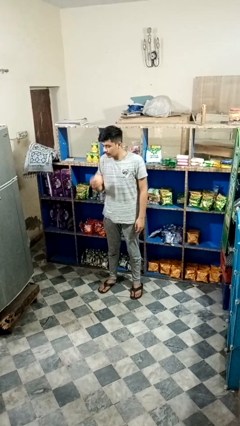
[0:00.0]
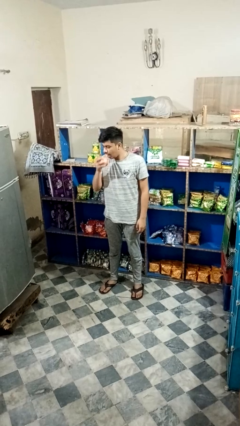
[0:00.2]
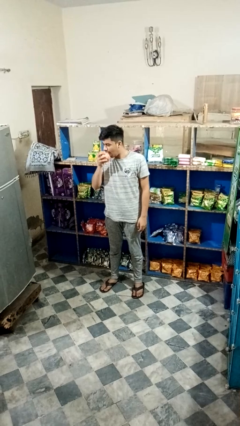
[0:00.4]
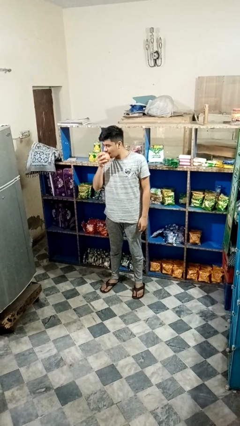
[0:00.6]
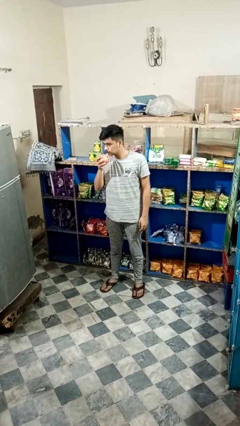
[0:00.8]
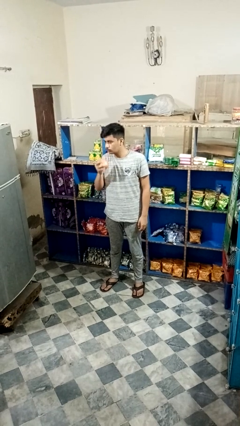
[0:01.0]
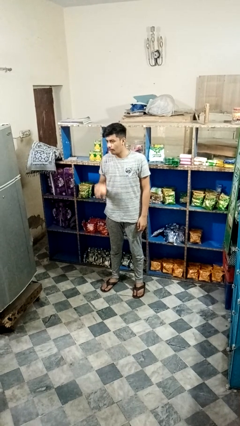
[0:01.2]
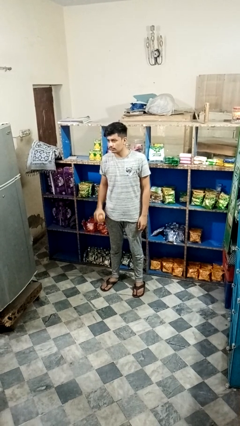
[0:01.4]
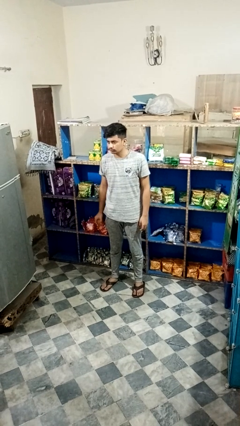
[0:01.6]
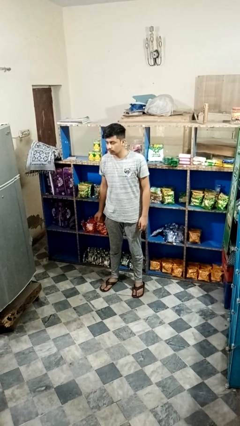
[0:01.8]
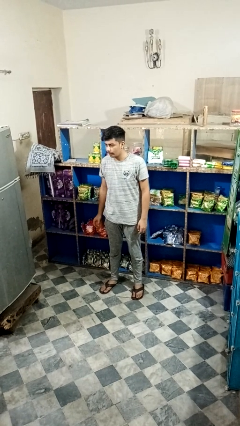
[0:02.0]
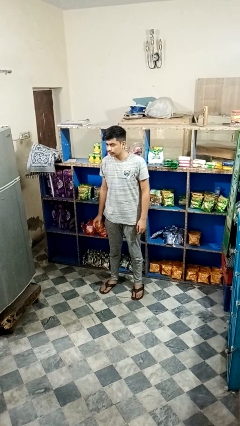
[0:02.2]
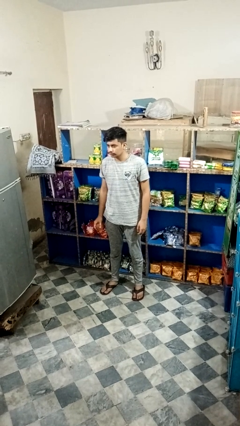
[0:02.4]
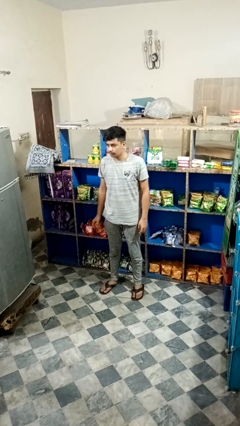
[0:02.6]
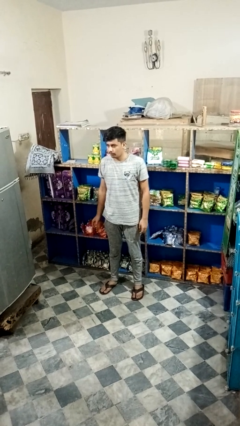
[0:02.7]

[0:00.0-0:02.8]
person eats apple

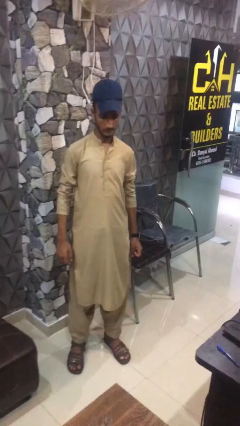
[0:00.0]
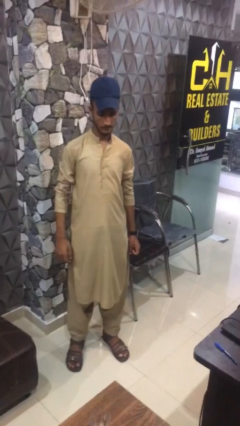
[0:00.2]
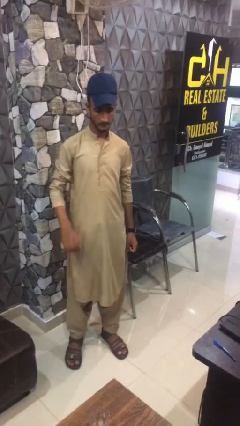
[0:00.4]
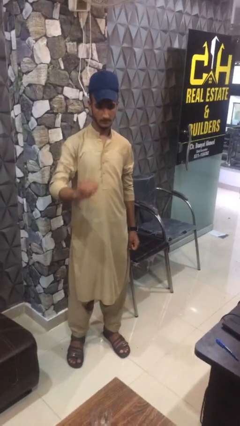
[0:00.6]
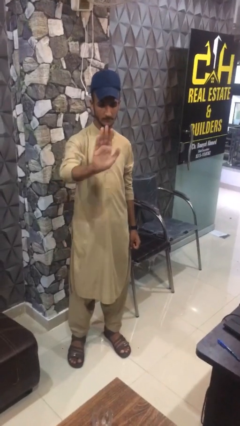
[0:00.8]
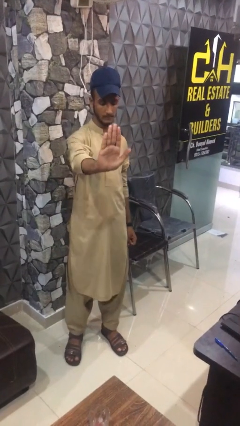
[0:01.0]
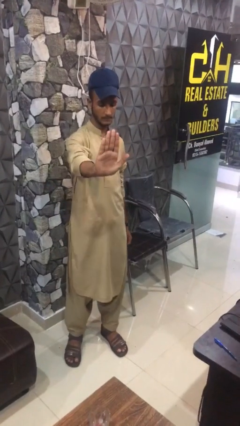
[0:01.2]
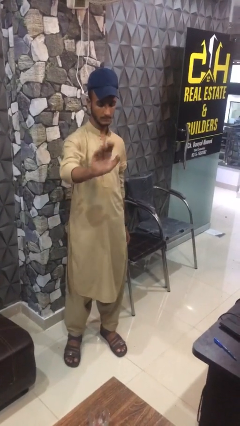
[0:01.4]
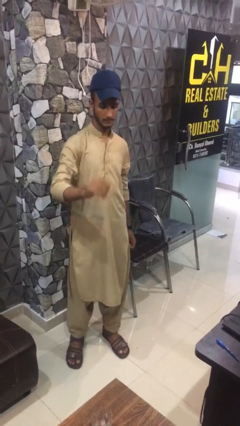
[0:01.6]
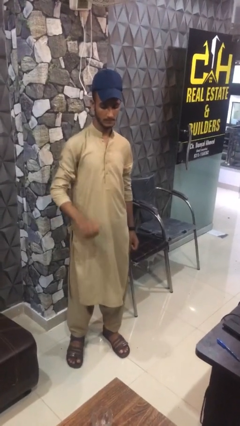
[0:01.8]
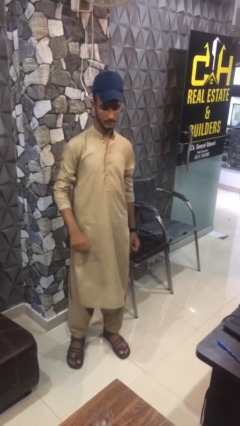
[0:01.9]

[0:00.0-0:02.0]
person gestures stop
